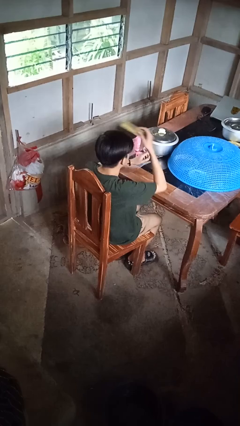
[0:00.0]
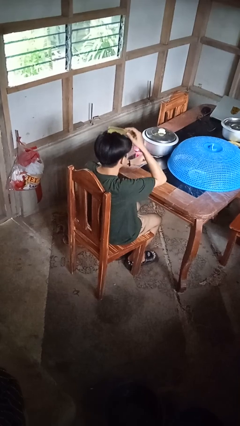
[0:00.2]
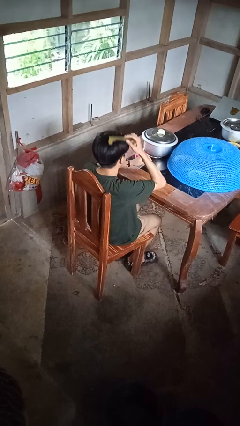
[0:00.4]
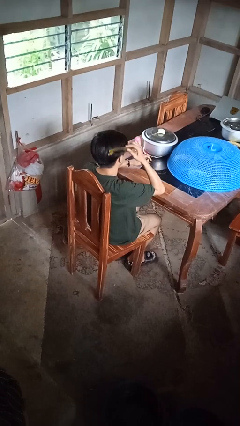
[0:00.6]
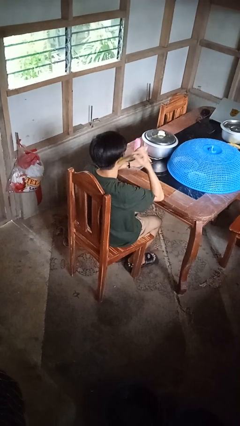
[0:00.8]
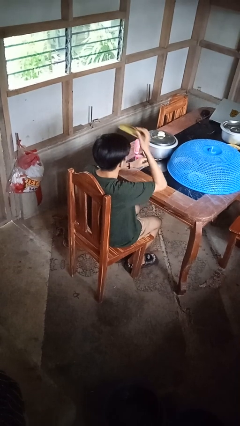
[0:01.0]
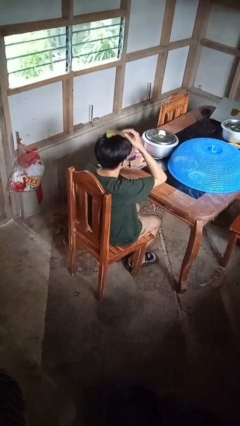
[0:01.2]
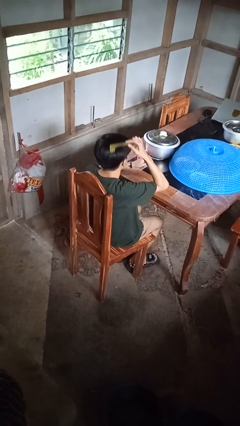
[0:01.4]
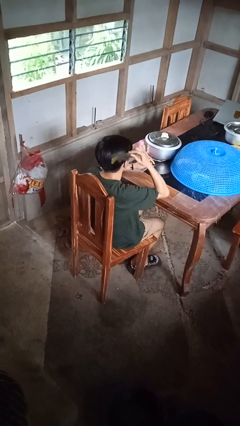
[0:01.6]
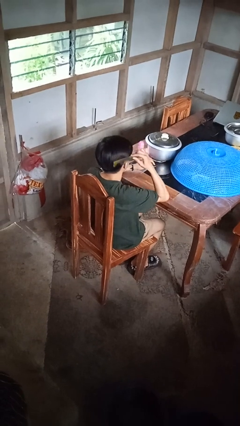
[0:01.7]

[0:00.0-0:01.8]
person brushes hair

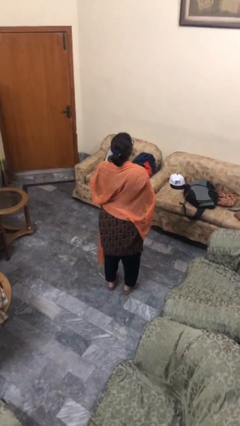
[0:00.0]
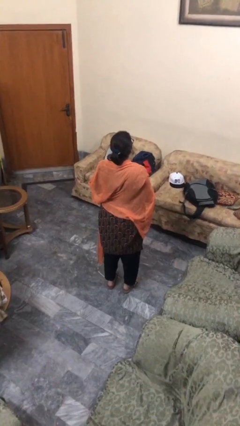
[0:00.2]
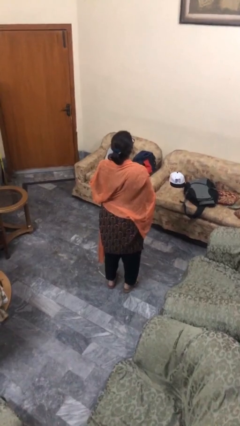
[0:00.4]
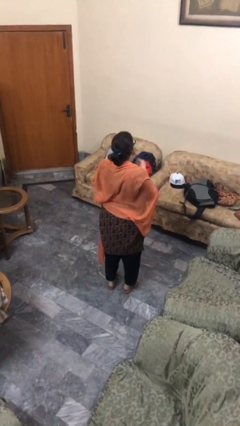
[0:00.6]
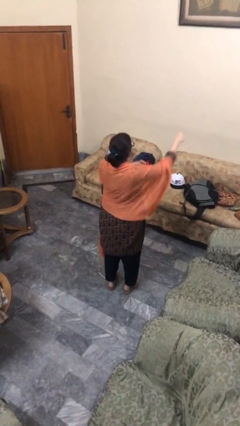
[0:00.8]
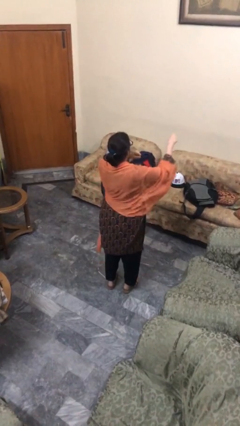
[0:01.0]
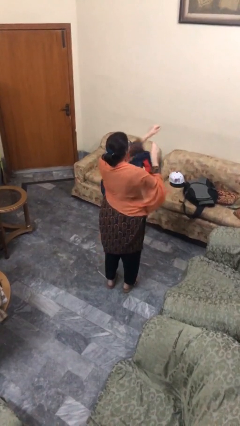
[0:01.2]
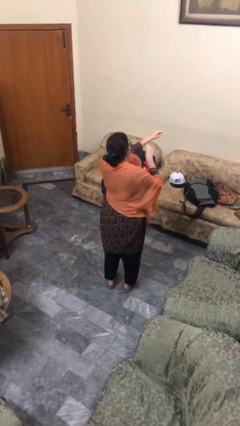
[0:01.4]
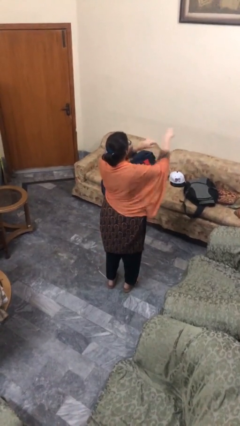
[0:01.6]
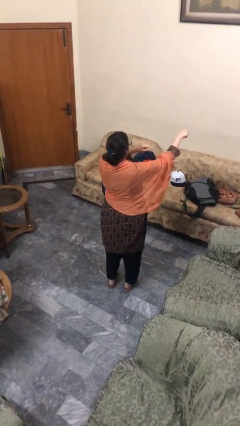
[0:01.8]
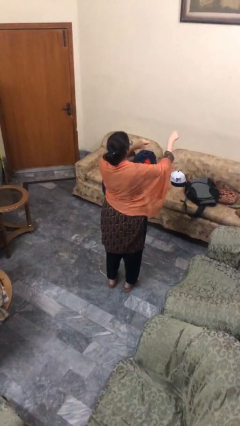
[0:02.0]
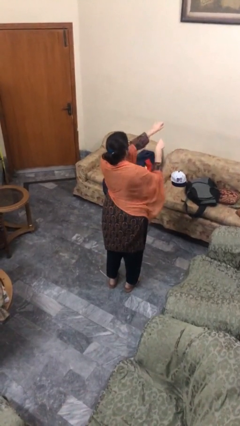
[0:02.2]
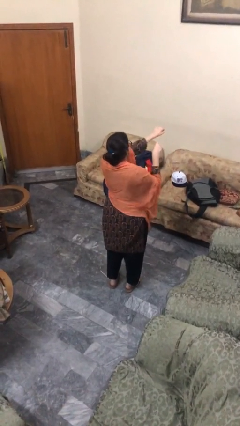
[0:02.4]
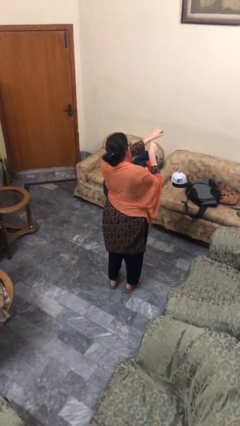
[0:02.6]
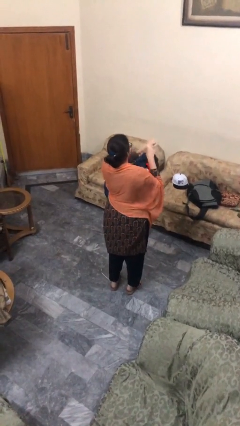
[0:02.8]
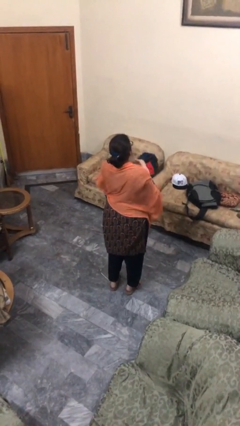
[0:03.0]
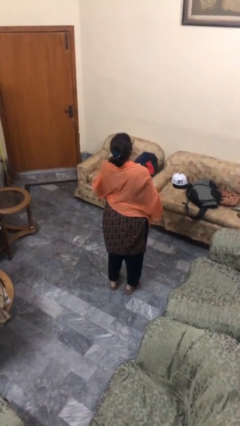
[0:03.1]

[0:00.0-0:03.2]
person punches

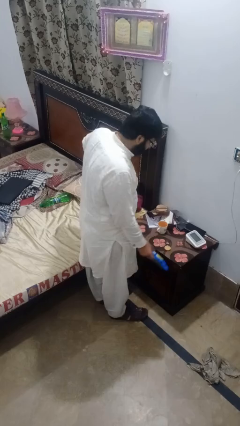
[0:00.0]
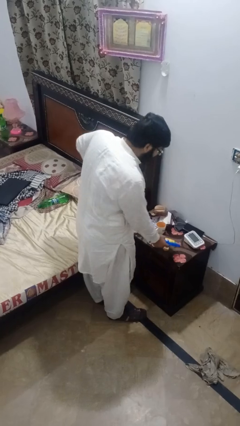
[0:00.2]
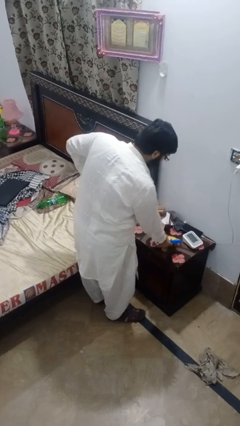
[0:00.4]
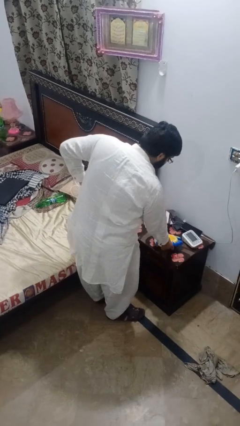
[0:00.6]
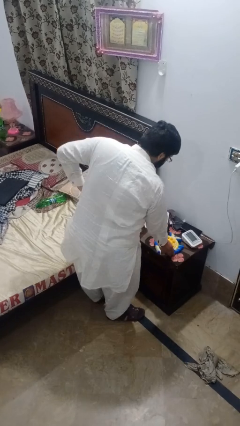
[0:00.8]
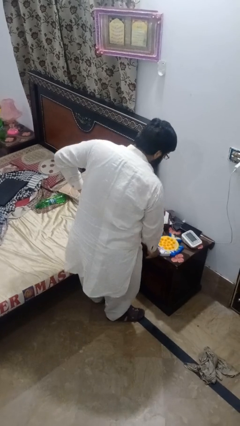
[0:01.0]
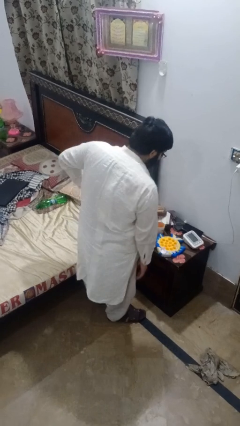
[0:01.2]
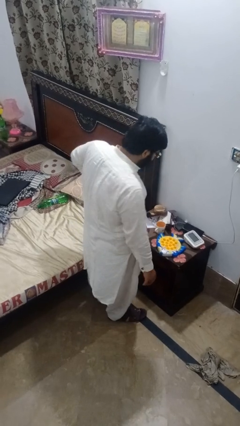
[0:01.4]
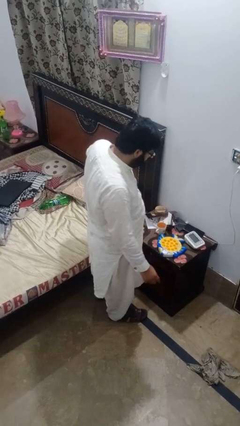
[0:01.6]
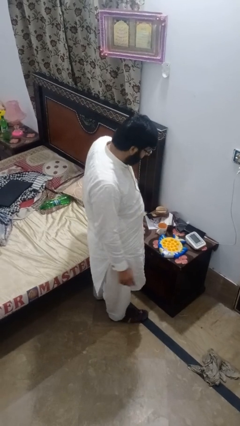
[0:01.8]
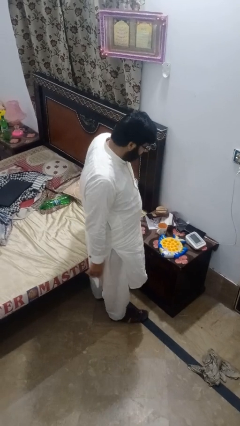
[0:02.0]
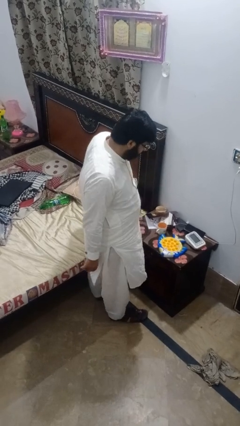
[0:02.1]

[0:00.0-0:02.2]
person puts down object on countertop

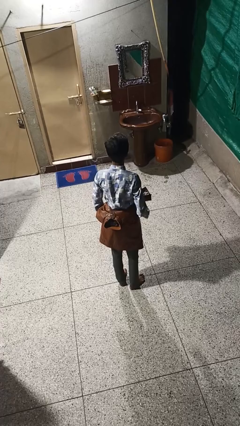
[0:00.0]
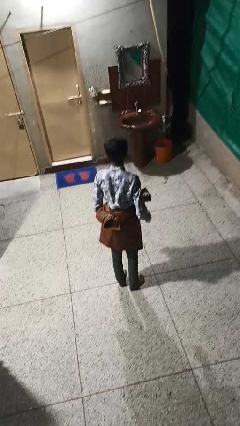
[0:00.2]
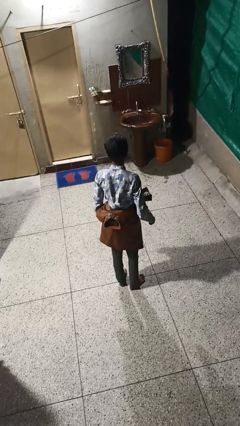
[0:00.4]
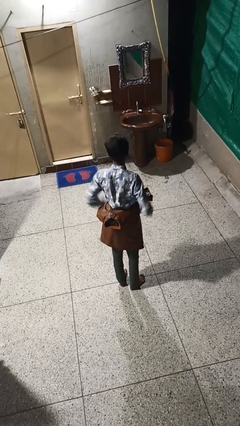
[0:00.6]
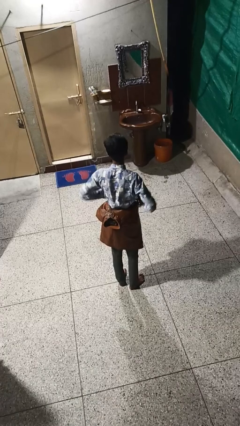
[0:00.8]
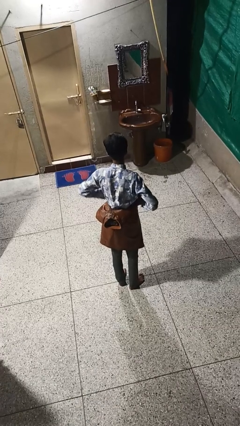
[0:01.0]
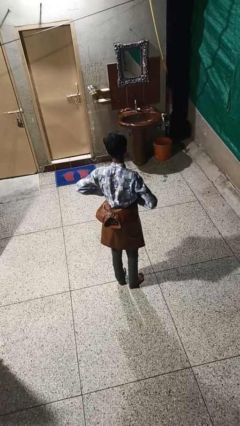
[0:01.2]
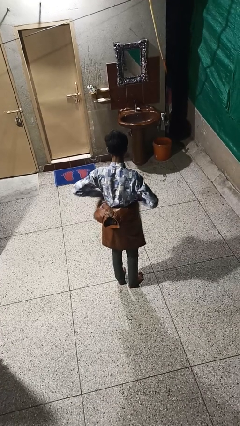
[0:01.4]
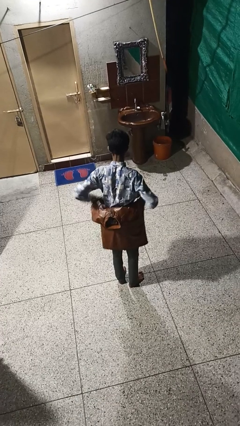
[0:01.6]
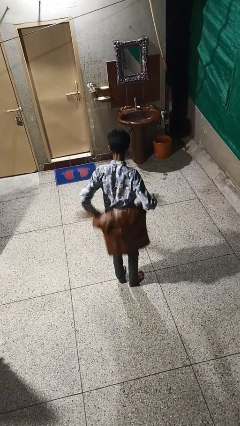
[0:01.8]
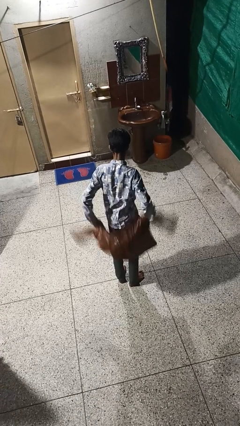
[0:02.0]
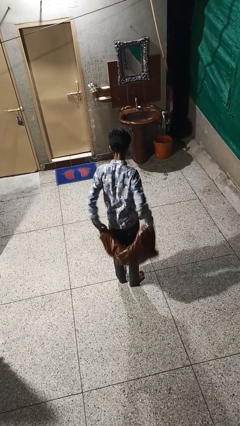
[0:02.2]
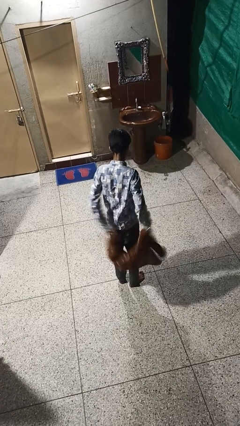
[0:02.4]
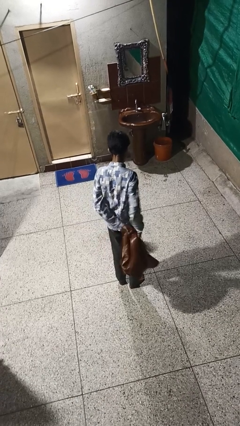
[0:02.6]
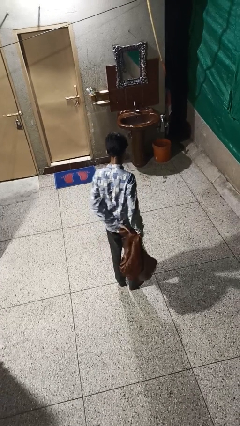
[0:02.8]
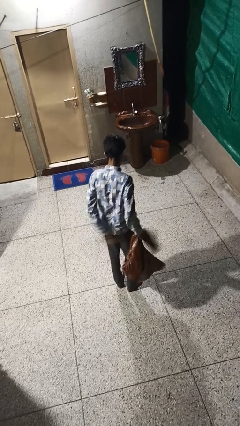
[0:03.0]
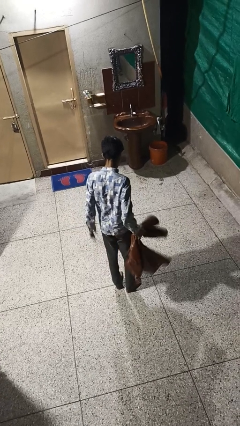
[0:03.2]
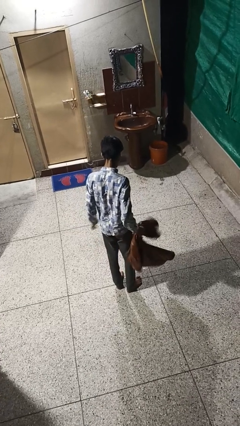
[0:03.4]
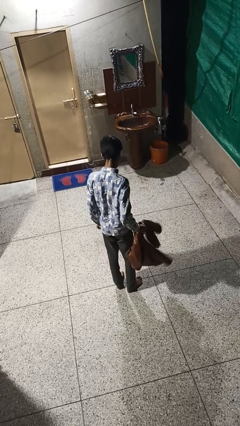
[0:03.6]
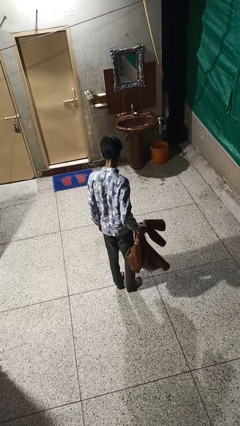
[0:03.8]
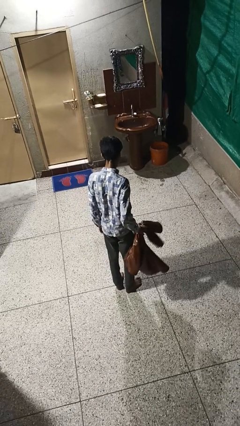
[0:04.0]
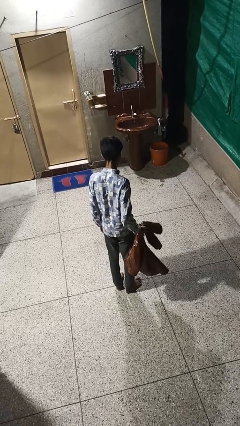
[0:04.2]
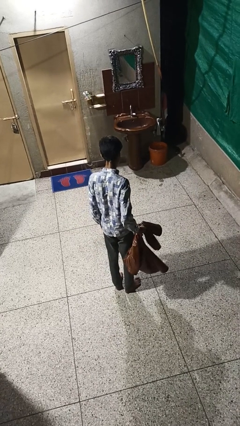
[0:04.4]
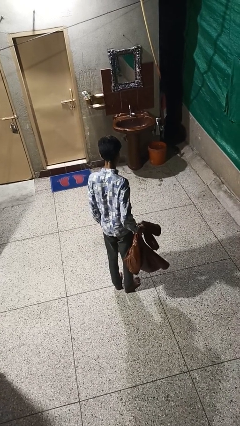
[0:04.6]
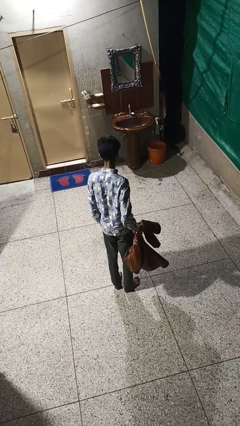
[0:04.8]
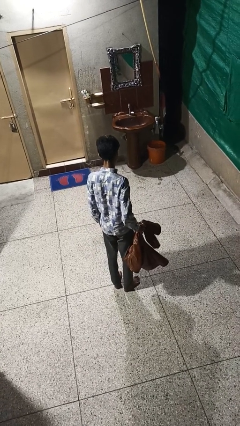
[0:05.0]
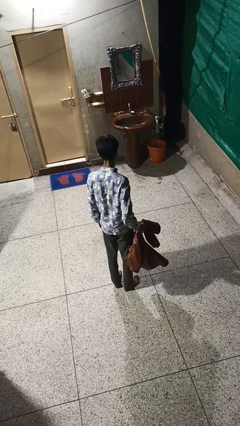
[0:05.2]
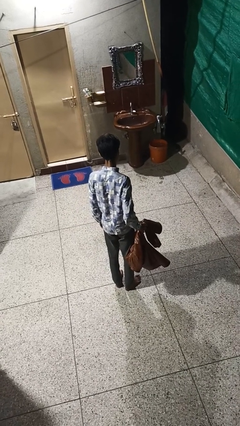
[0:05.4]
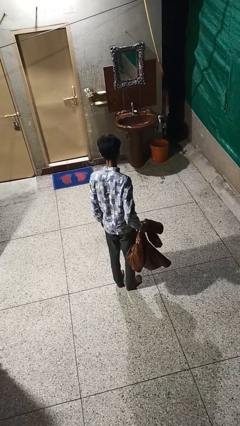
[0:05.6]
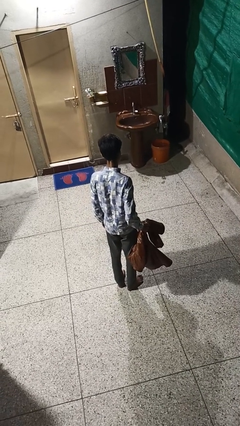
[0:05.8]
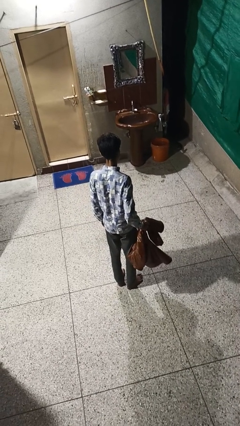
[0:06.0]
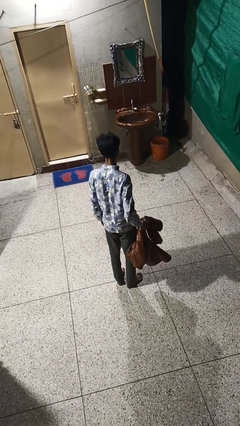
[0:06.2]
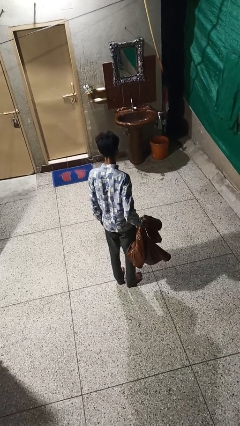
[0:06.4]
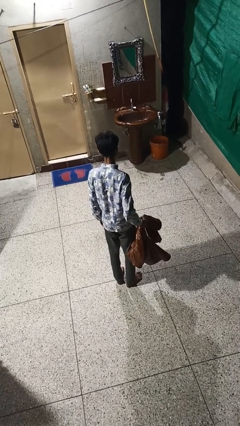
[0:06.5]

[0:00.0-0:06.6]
person unties jacket around waist

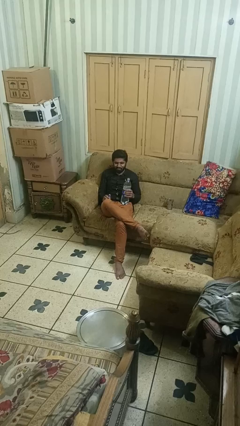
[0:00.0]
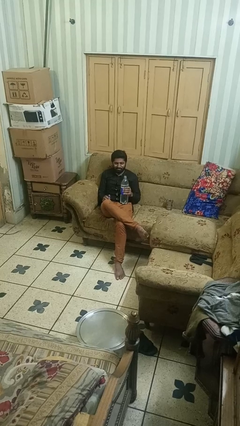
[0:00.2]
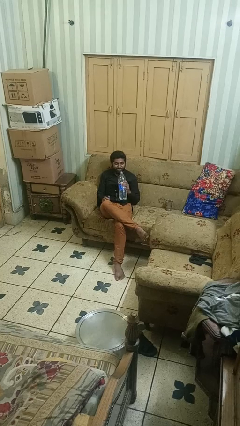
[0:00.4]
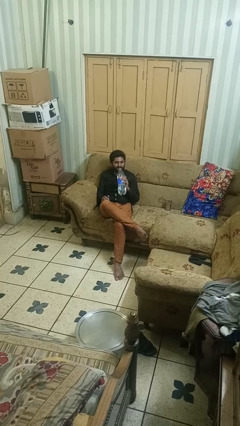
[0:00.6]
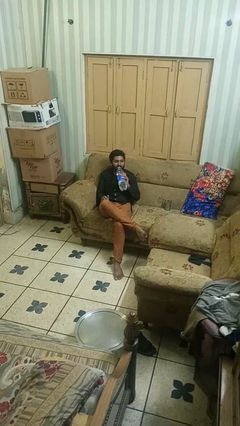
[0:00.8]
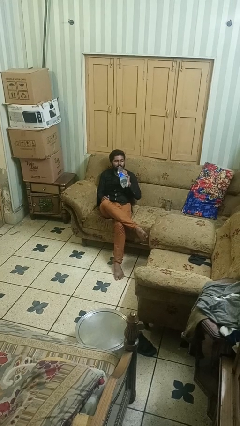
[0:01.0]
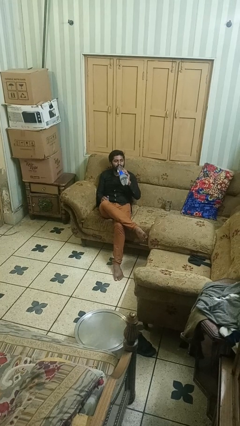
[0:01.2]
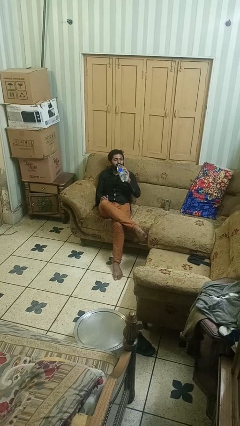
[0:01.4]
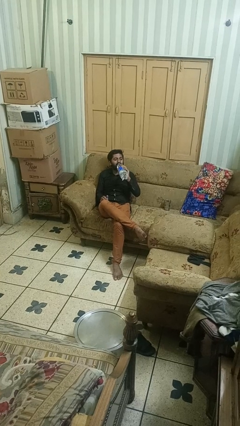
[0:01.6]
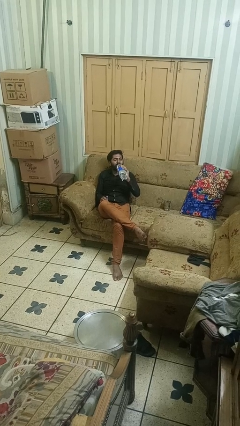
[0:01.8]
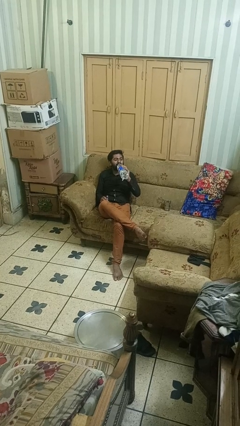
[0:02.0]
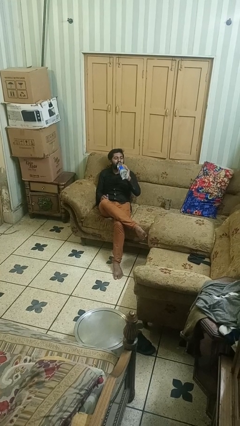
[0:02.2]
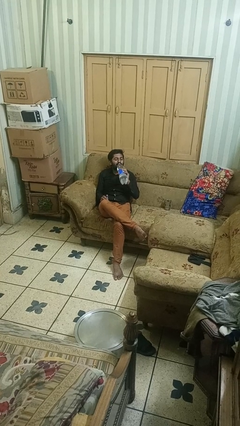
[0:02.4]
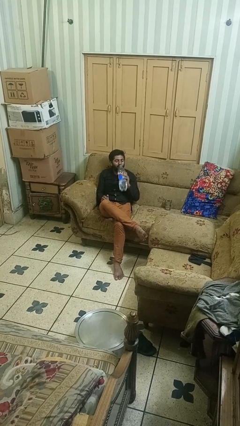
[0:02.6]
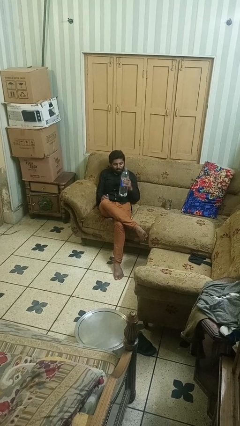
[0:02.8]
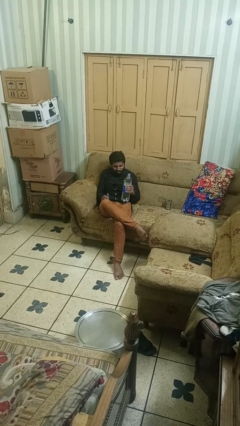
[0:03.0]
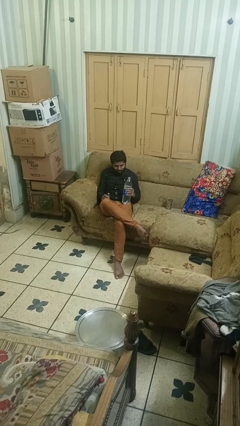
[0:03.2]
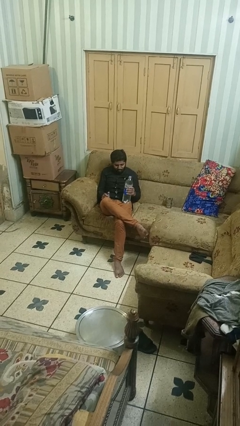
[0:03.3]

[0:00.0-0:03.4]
person drinks from bottle

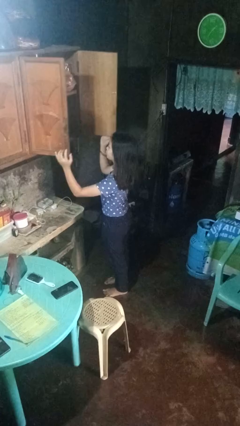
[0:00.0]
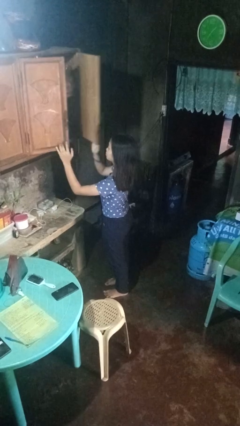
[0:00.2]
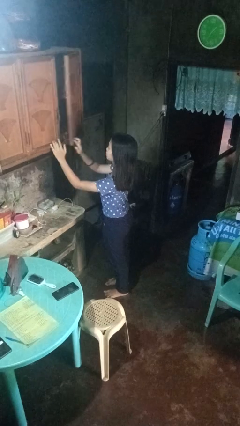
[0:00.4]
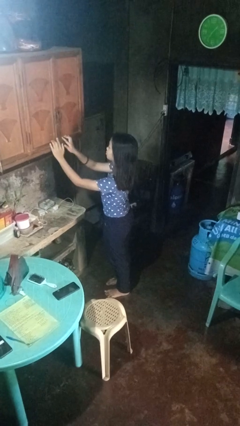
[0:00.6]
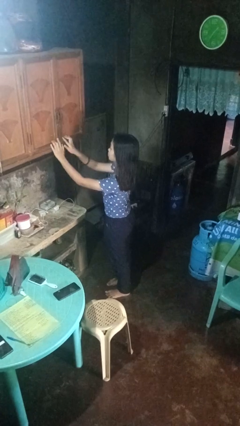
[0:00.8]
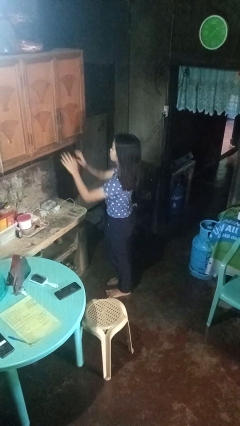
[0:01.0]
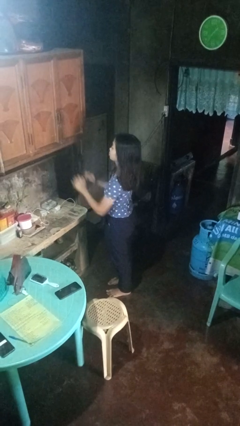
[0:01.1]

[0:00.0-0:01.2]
person closes cabinet
